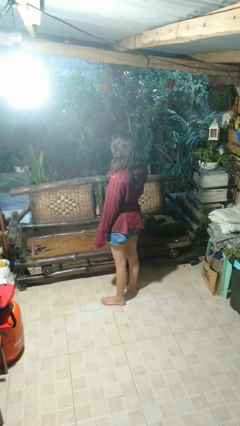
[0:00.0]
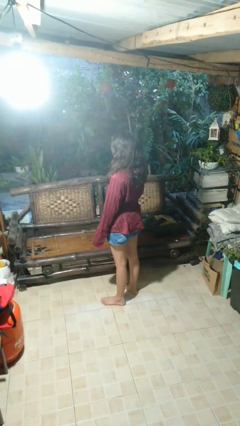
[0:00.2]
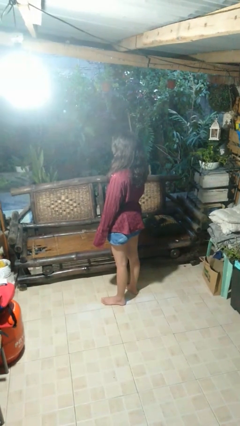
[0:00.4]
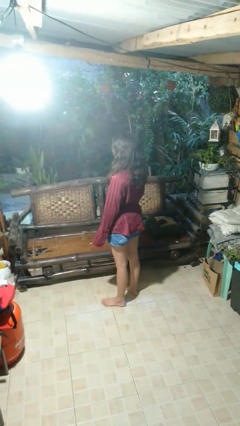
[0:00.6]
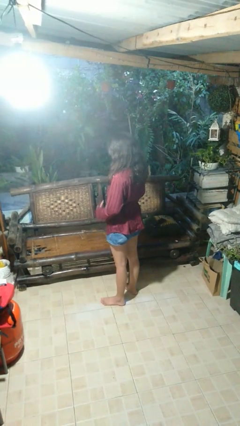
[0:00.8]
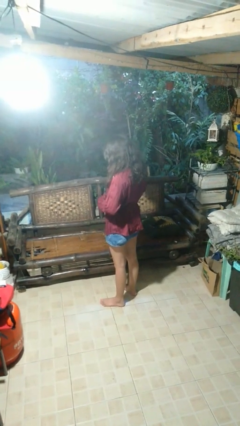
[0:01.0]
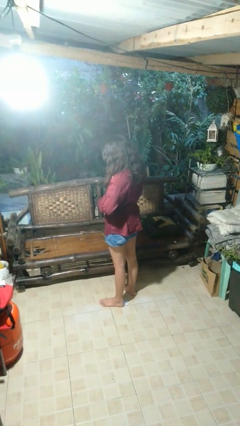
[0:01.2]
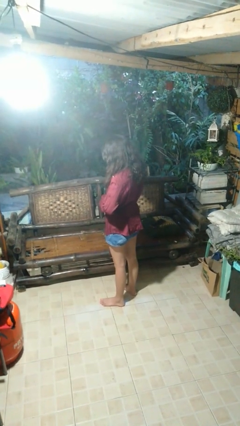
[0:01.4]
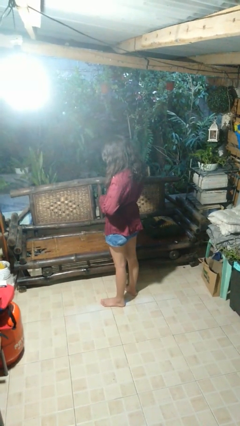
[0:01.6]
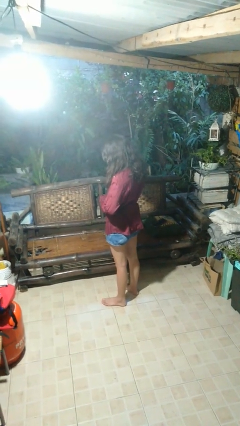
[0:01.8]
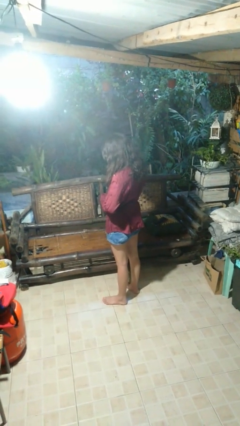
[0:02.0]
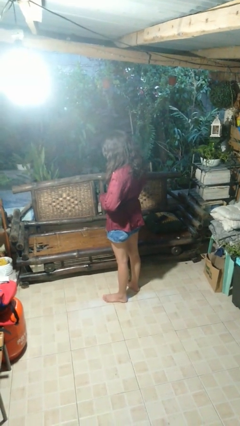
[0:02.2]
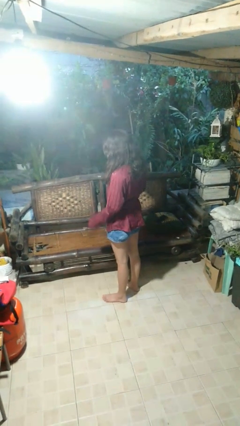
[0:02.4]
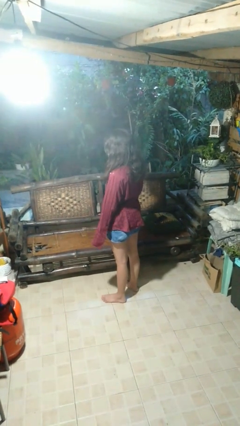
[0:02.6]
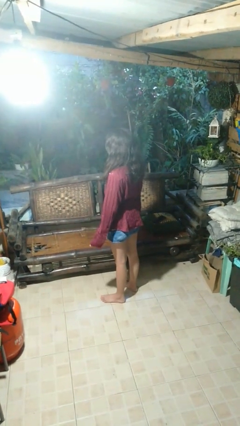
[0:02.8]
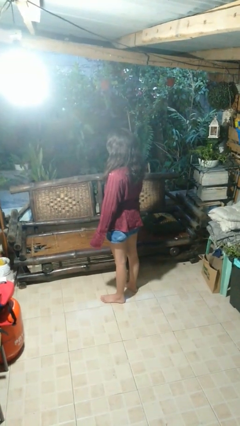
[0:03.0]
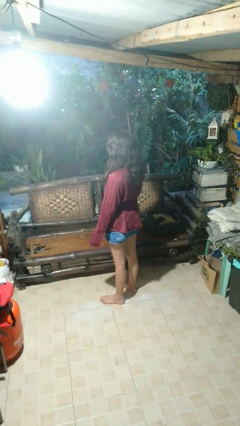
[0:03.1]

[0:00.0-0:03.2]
person unbuttons shirt

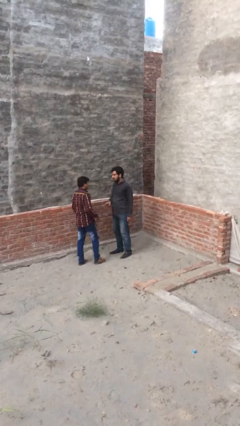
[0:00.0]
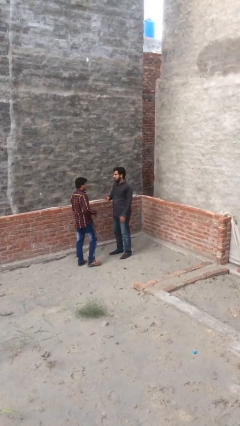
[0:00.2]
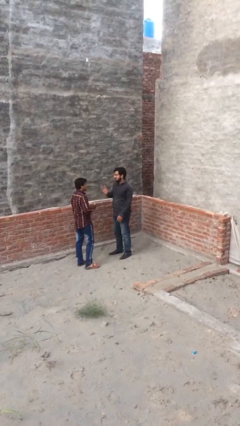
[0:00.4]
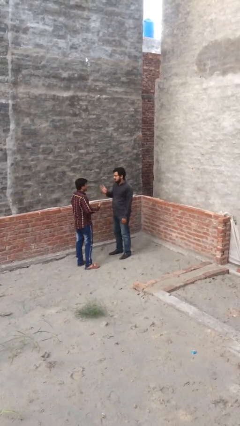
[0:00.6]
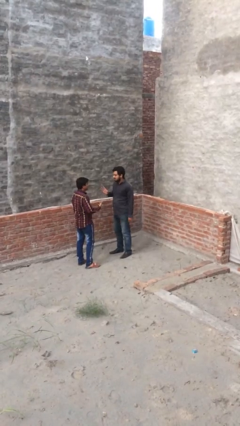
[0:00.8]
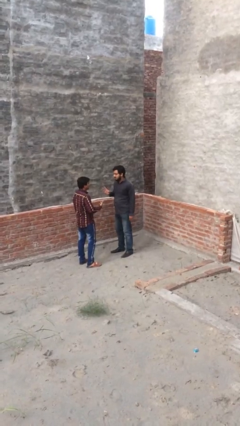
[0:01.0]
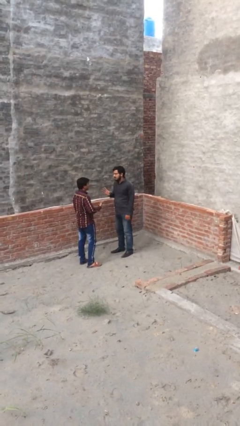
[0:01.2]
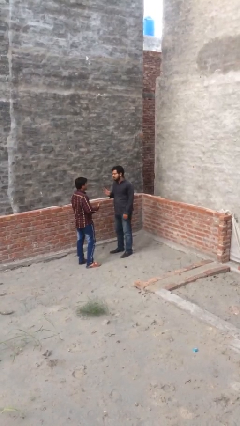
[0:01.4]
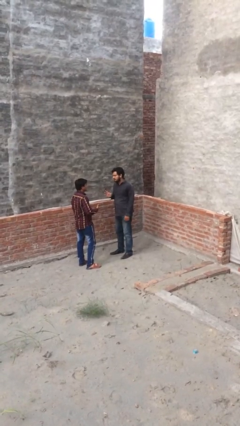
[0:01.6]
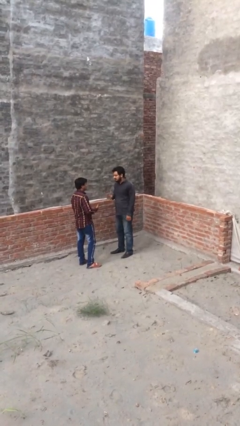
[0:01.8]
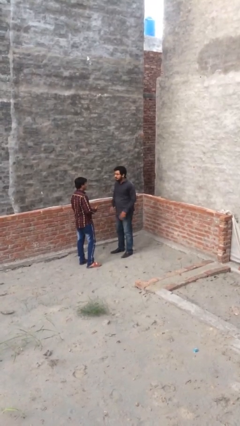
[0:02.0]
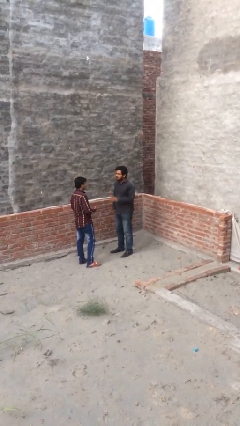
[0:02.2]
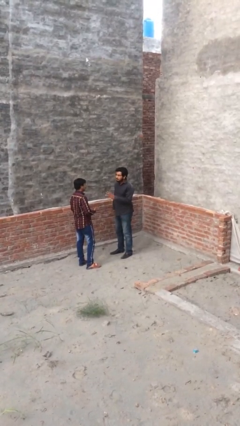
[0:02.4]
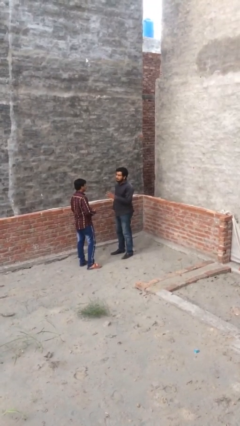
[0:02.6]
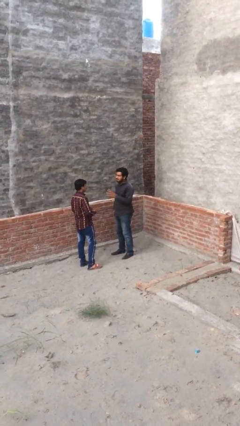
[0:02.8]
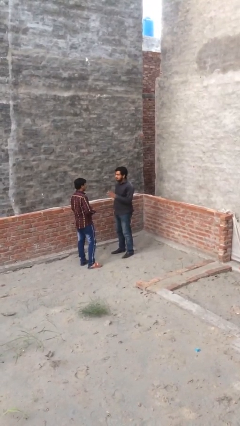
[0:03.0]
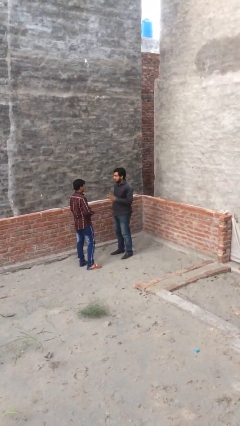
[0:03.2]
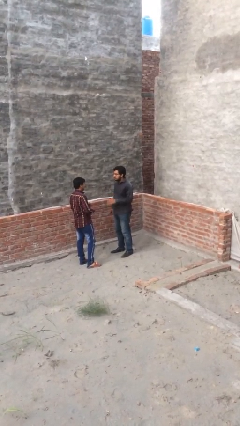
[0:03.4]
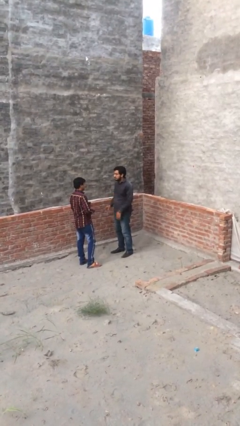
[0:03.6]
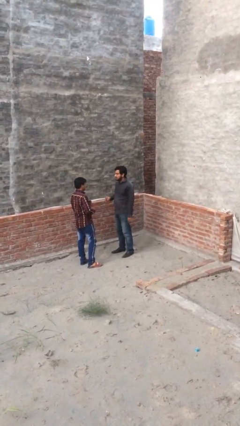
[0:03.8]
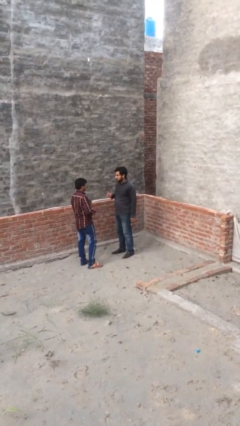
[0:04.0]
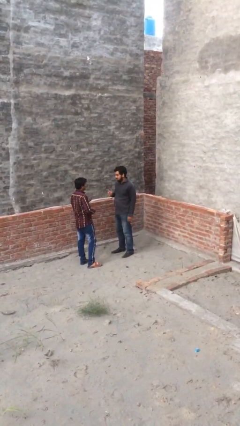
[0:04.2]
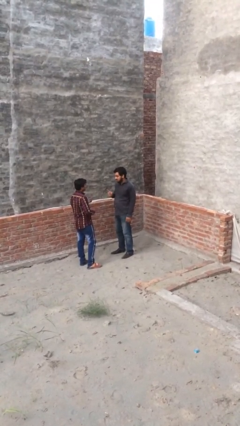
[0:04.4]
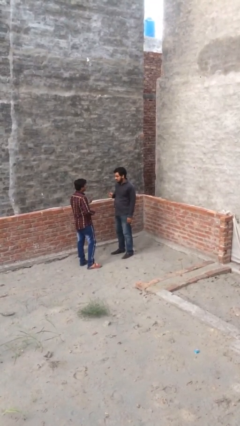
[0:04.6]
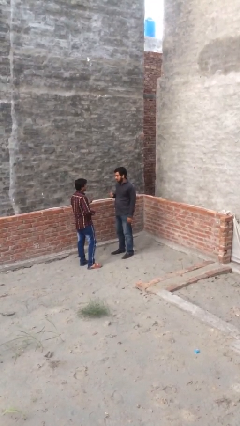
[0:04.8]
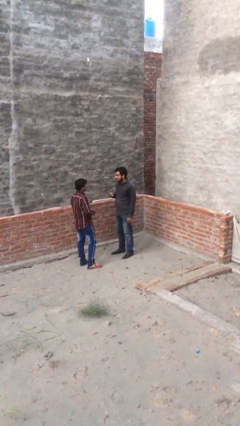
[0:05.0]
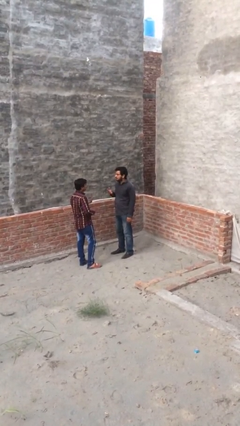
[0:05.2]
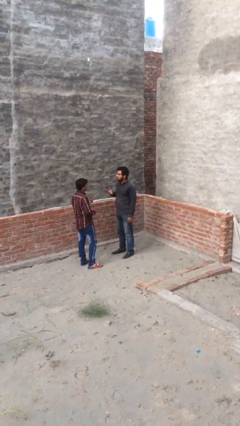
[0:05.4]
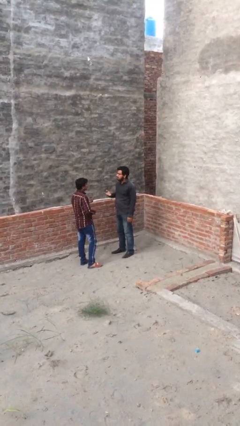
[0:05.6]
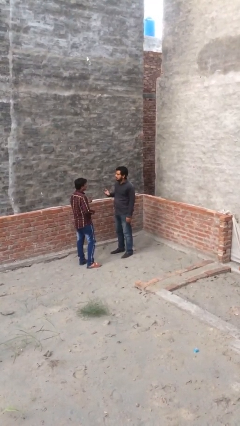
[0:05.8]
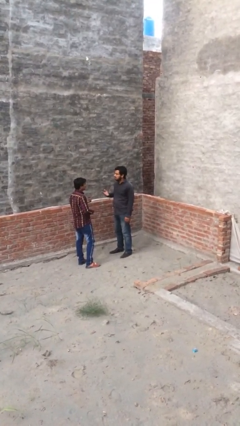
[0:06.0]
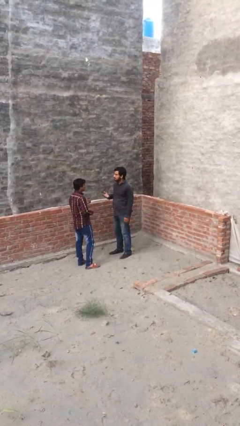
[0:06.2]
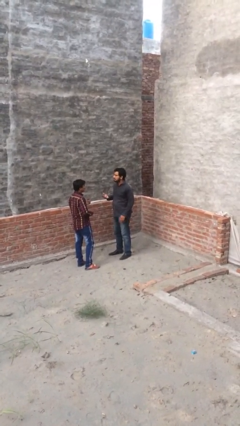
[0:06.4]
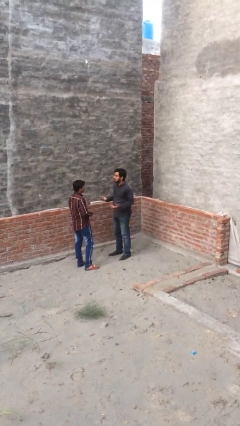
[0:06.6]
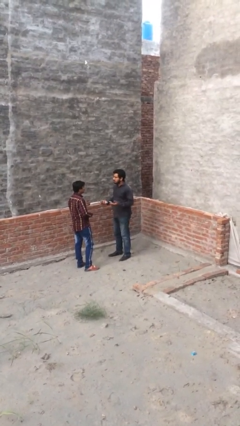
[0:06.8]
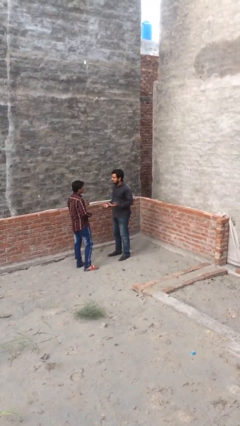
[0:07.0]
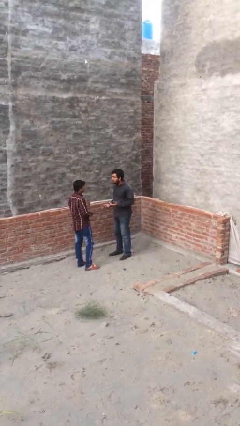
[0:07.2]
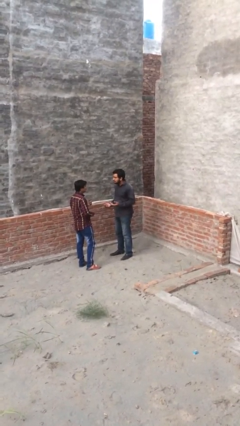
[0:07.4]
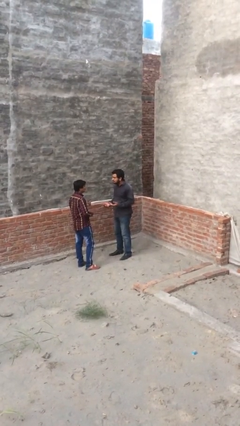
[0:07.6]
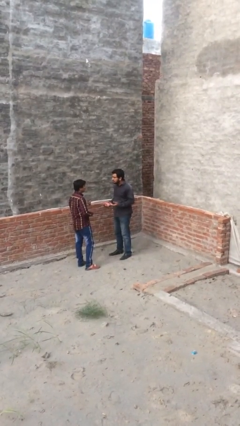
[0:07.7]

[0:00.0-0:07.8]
person talks to person

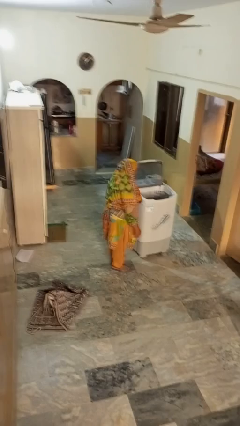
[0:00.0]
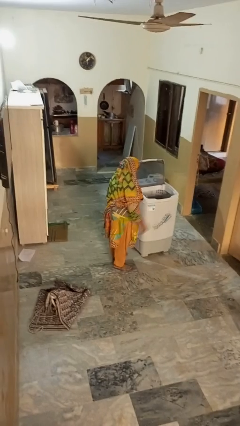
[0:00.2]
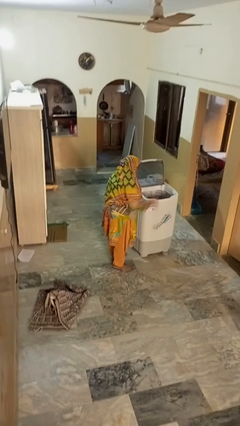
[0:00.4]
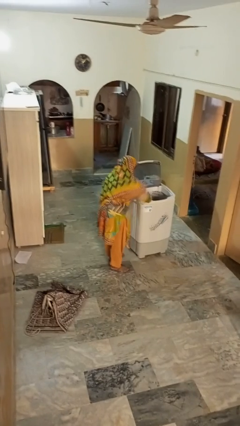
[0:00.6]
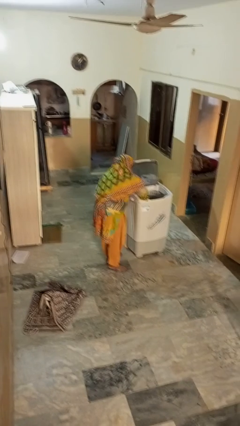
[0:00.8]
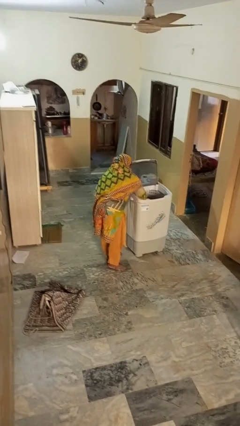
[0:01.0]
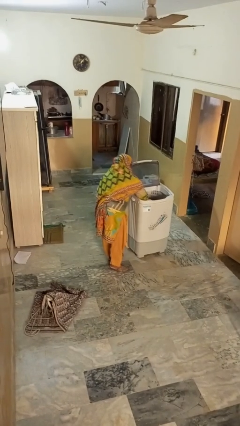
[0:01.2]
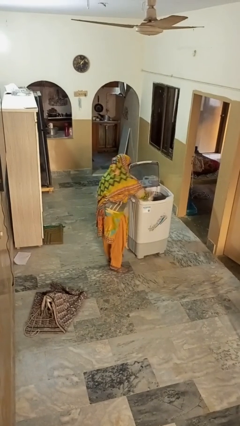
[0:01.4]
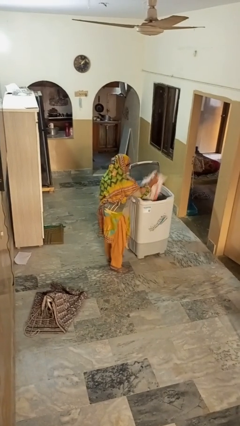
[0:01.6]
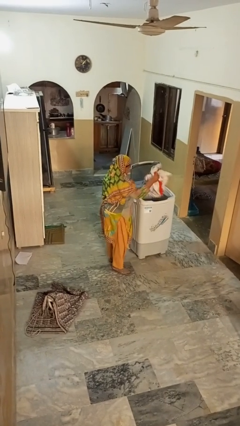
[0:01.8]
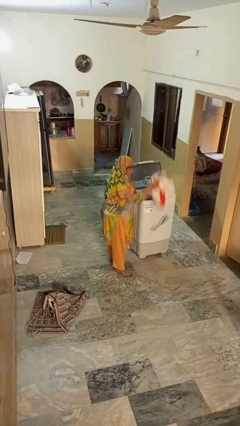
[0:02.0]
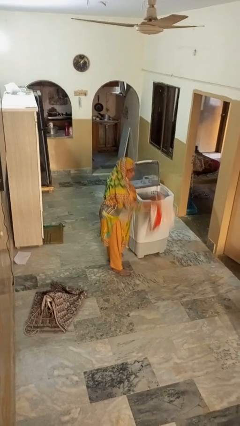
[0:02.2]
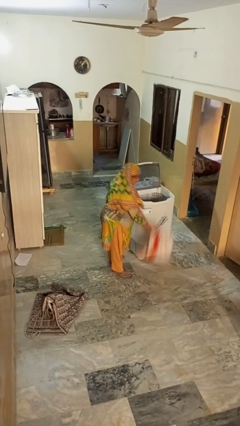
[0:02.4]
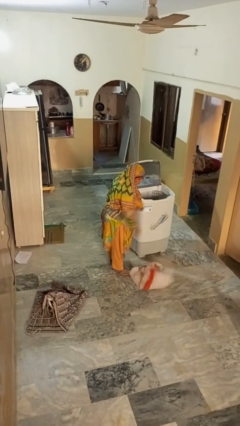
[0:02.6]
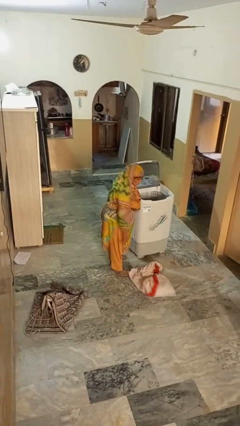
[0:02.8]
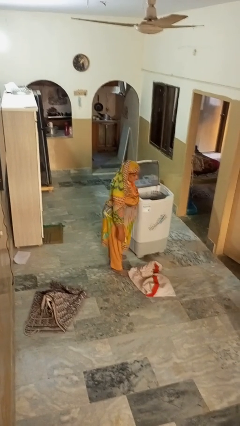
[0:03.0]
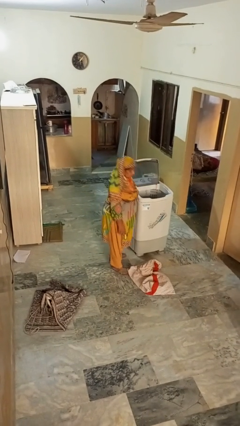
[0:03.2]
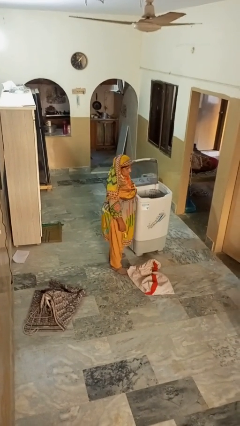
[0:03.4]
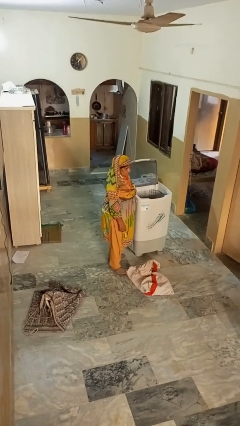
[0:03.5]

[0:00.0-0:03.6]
person unloads clotheswasher

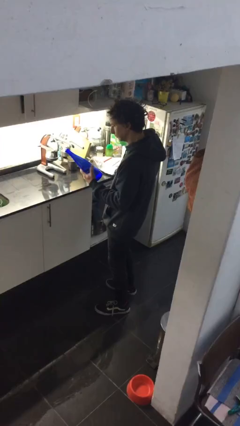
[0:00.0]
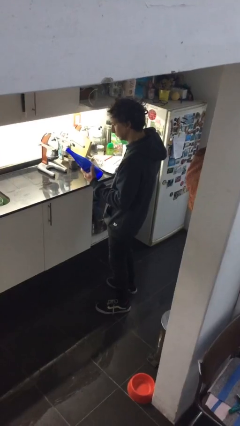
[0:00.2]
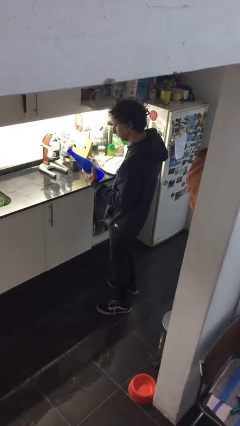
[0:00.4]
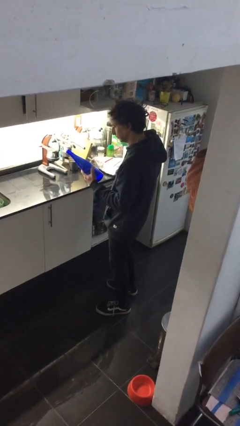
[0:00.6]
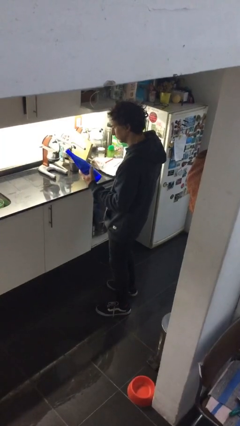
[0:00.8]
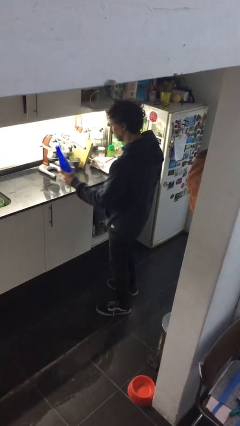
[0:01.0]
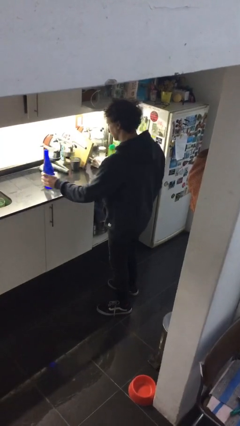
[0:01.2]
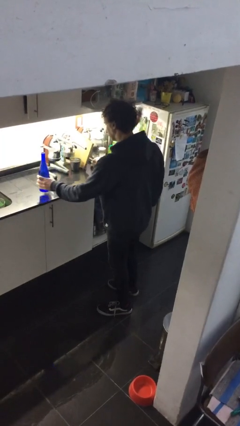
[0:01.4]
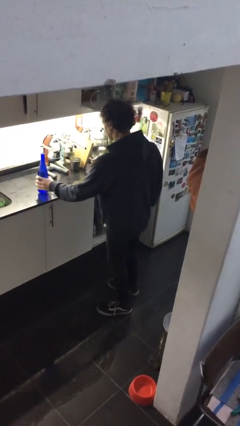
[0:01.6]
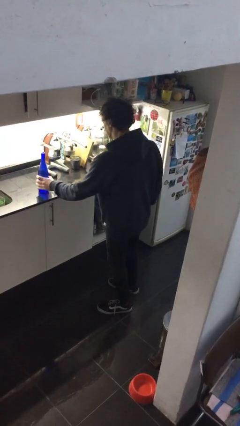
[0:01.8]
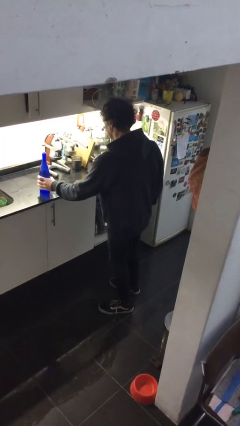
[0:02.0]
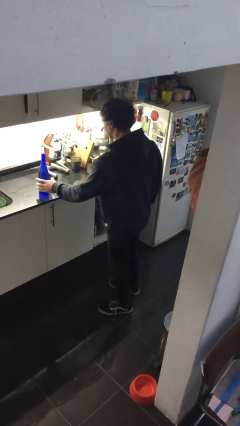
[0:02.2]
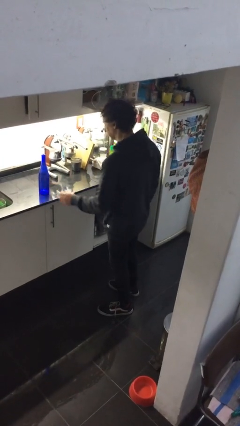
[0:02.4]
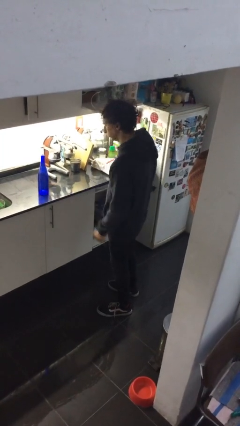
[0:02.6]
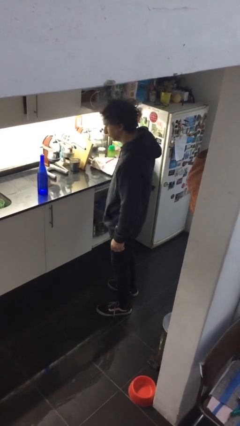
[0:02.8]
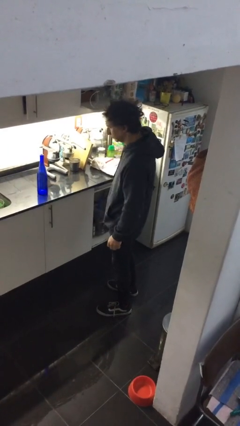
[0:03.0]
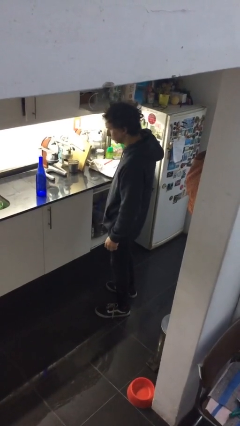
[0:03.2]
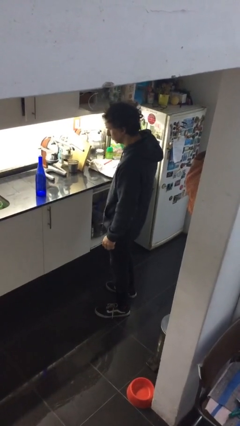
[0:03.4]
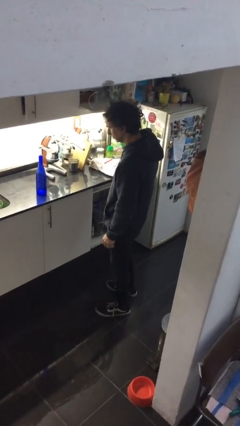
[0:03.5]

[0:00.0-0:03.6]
person puts down object on countertop
